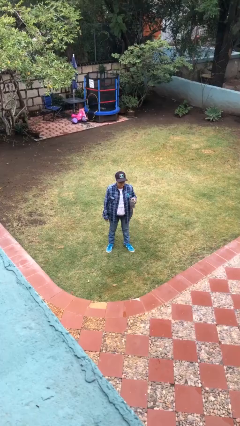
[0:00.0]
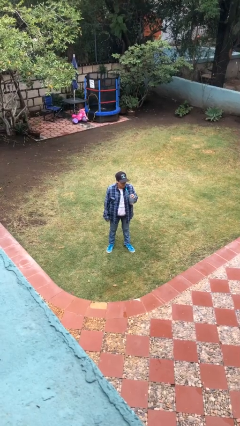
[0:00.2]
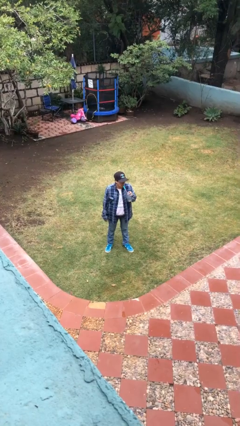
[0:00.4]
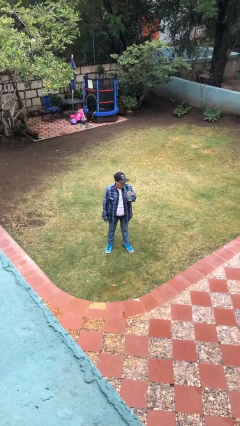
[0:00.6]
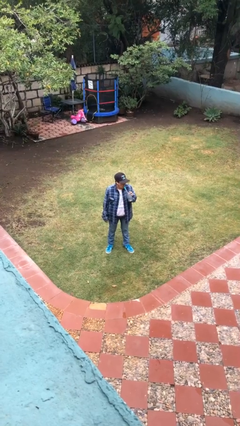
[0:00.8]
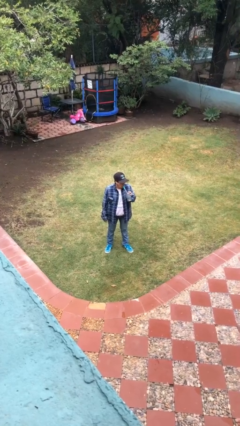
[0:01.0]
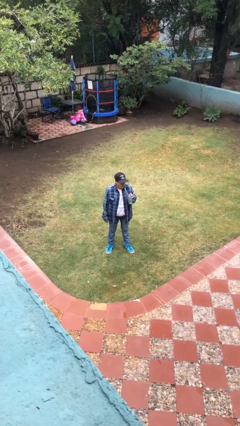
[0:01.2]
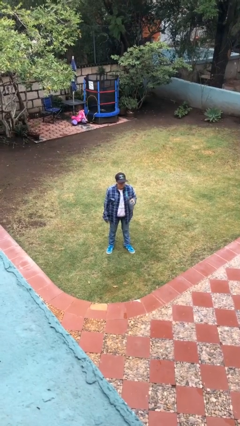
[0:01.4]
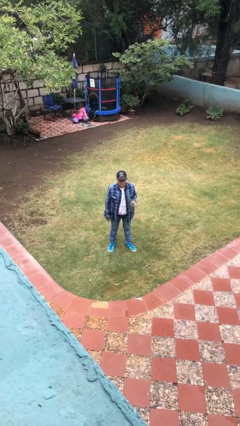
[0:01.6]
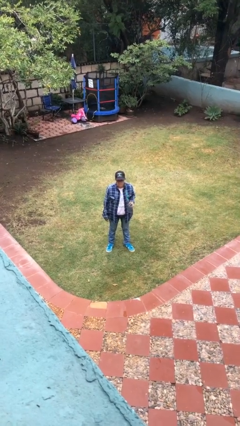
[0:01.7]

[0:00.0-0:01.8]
person drinks from straw

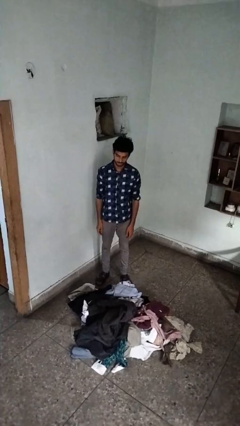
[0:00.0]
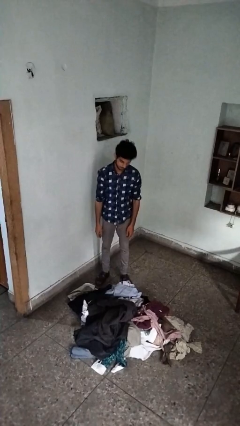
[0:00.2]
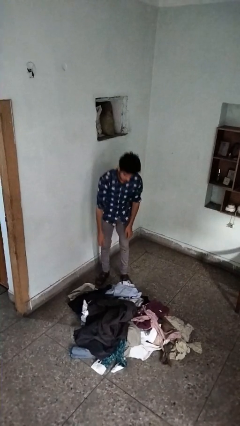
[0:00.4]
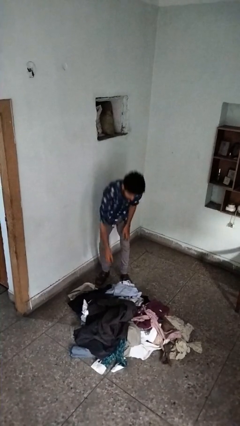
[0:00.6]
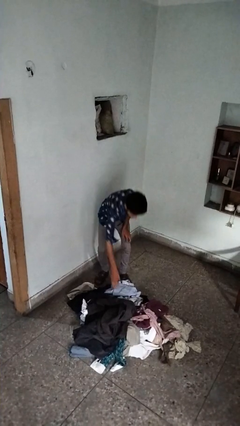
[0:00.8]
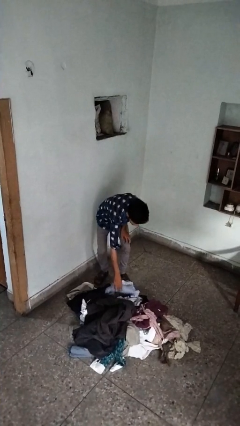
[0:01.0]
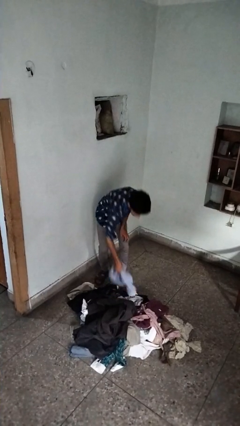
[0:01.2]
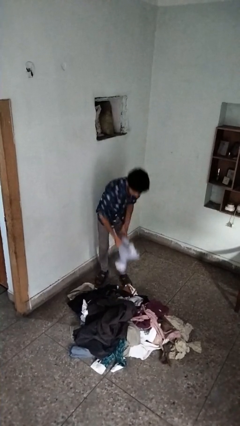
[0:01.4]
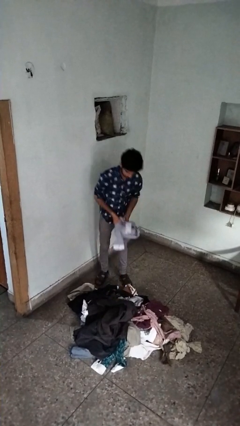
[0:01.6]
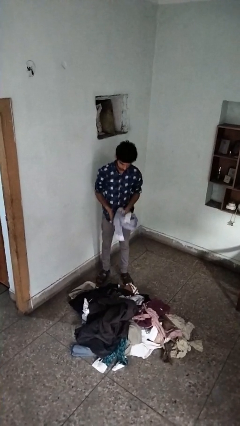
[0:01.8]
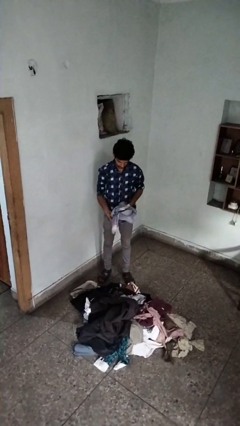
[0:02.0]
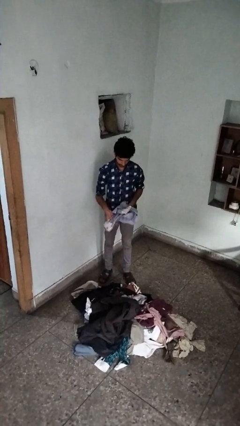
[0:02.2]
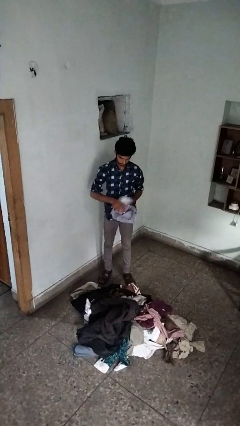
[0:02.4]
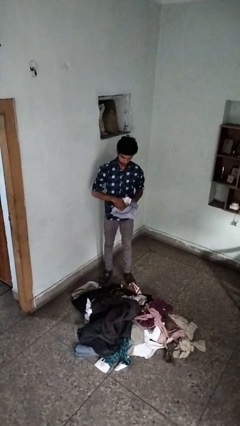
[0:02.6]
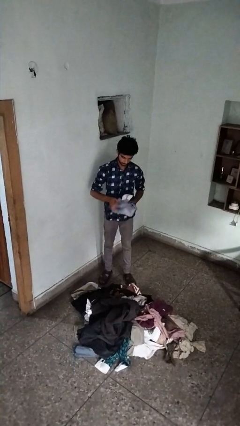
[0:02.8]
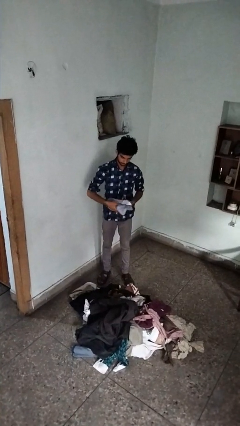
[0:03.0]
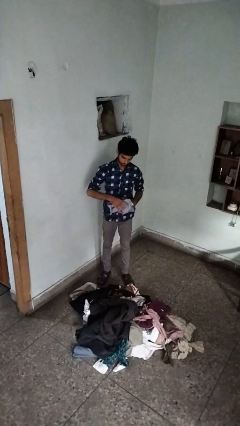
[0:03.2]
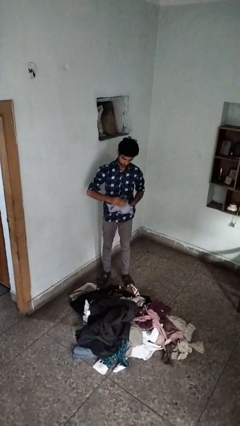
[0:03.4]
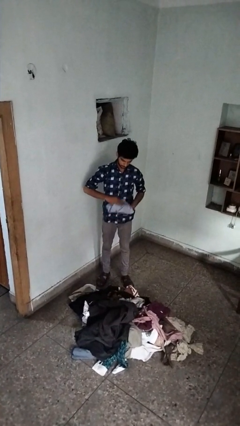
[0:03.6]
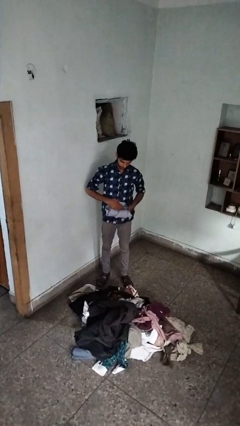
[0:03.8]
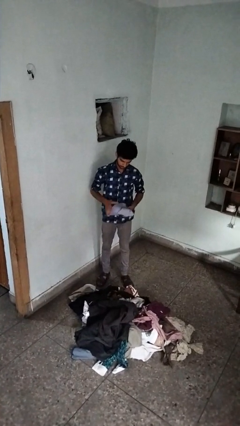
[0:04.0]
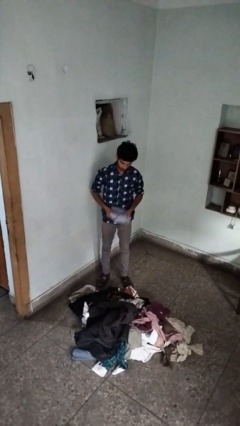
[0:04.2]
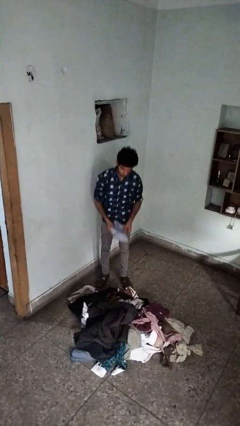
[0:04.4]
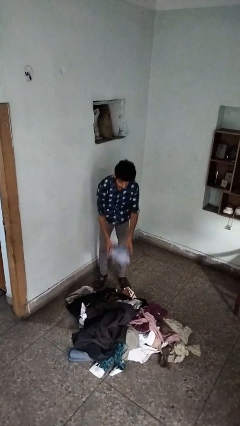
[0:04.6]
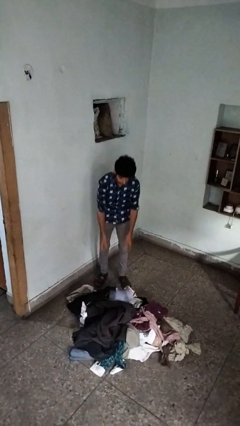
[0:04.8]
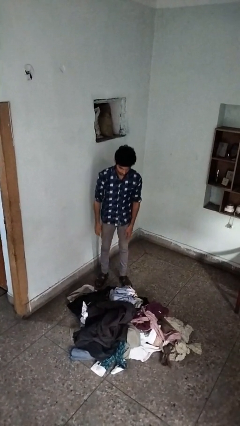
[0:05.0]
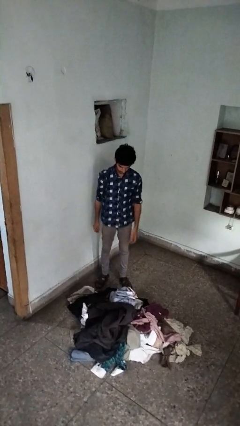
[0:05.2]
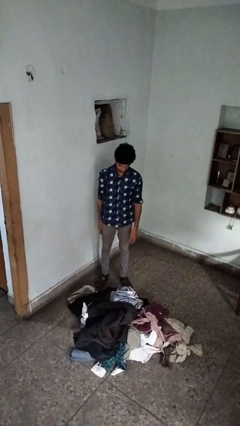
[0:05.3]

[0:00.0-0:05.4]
person folds shirt

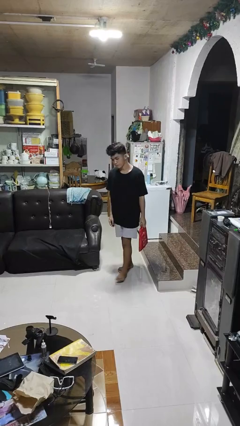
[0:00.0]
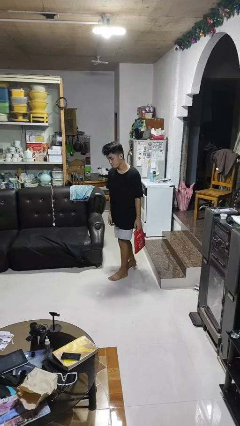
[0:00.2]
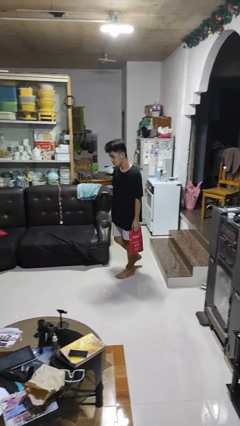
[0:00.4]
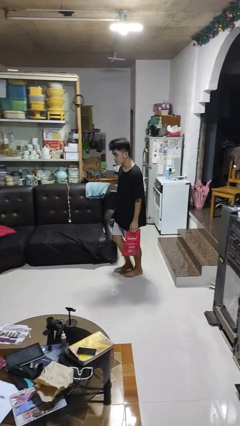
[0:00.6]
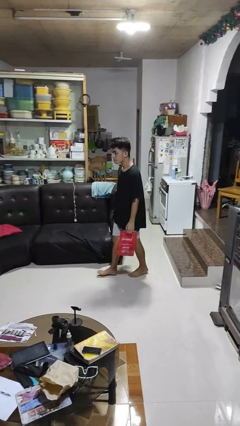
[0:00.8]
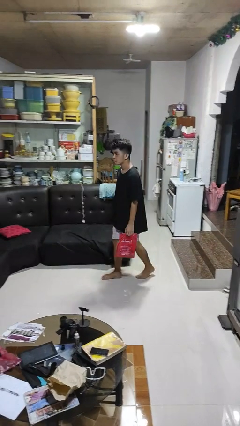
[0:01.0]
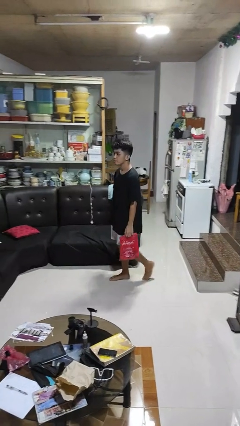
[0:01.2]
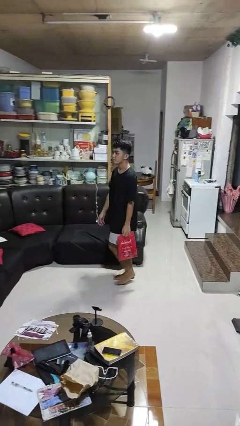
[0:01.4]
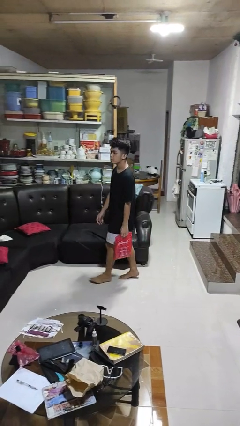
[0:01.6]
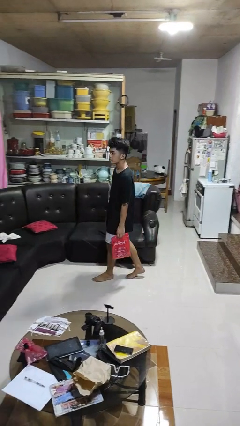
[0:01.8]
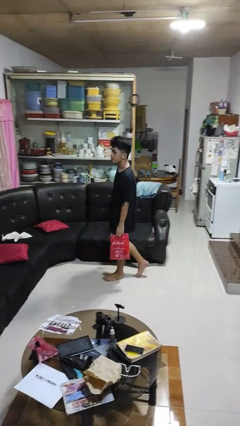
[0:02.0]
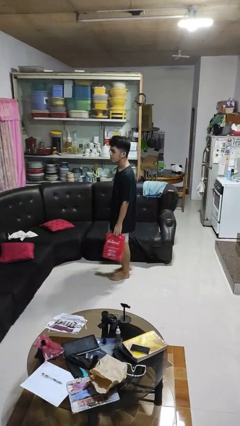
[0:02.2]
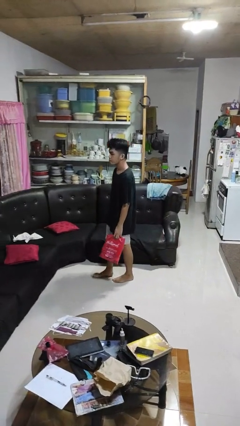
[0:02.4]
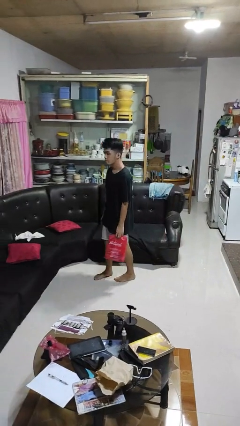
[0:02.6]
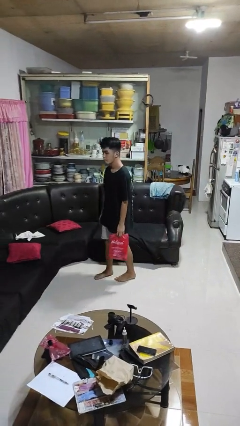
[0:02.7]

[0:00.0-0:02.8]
person carries groceries

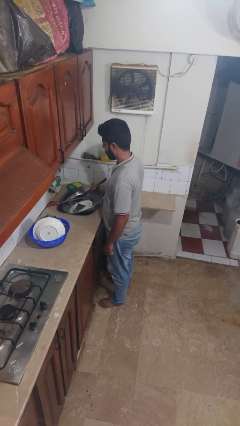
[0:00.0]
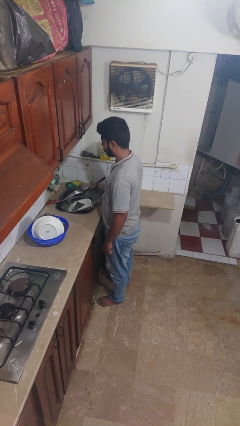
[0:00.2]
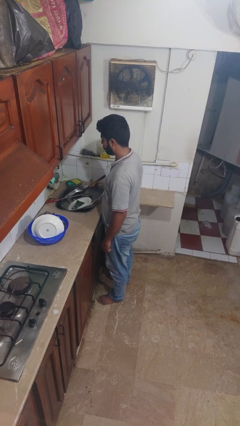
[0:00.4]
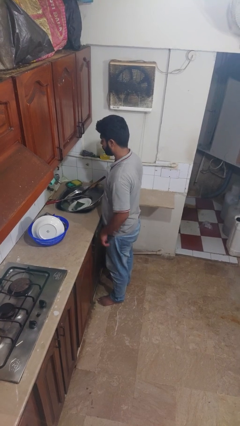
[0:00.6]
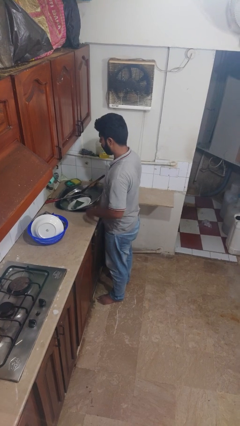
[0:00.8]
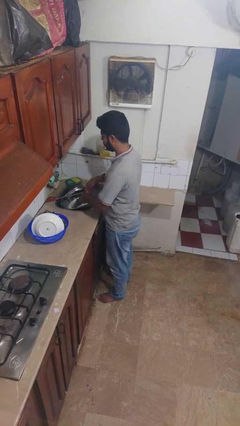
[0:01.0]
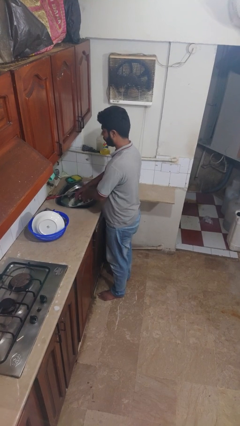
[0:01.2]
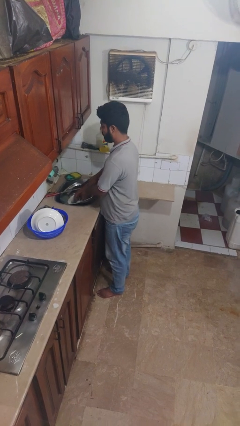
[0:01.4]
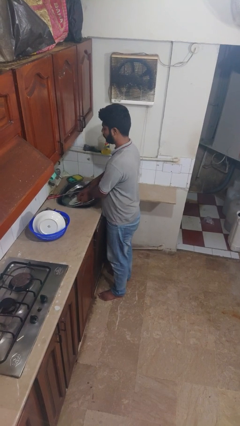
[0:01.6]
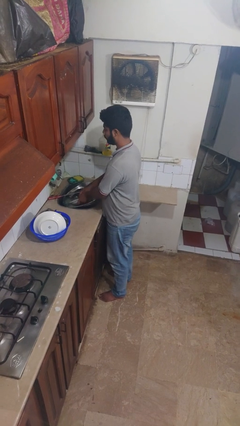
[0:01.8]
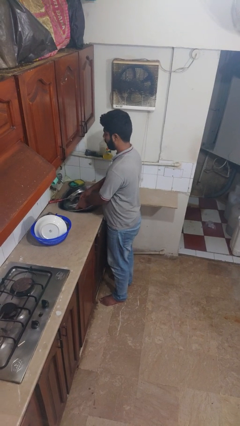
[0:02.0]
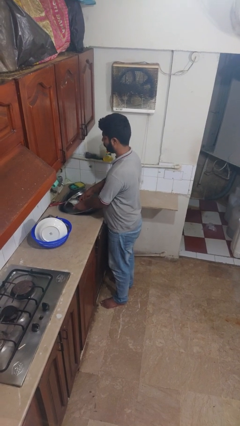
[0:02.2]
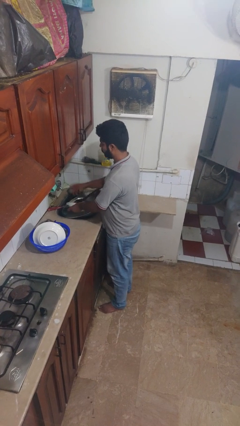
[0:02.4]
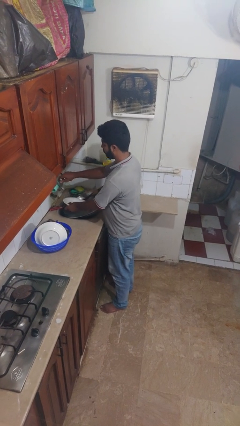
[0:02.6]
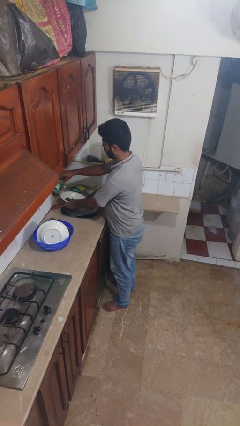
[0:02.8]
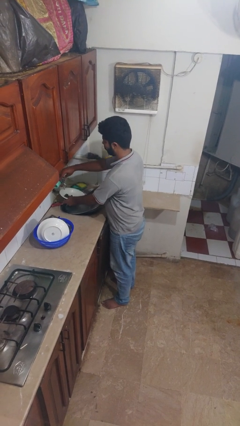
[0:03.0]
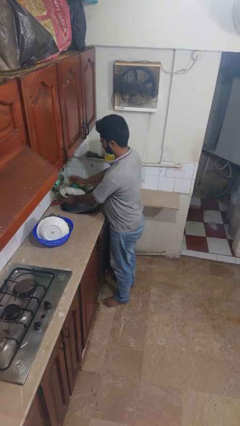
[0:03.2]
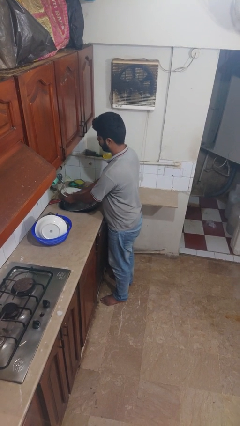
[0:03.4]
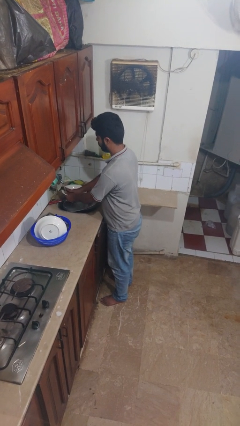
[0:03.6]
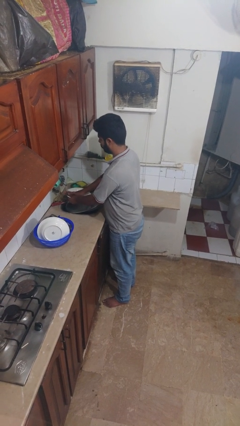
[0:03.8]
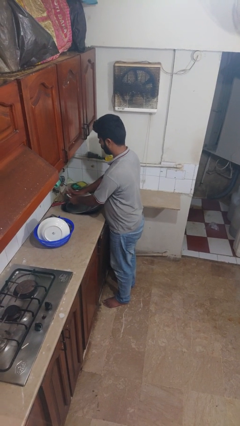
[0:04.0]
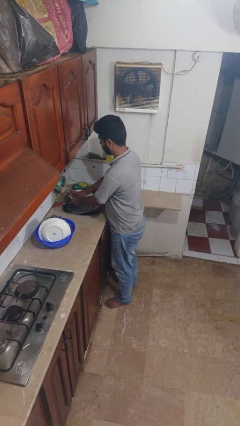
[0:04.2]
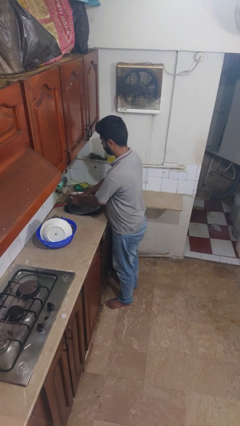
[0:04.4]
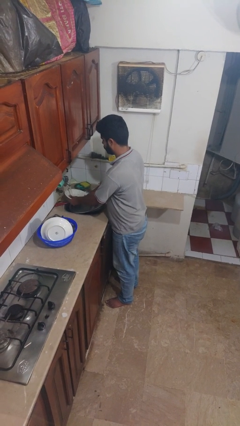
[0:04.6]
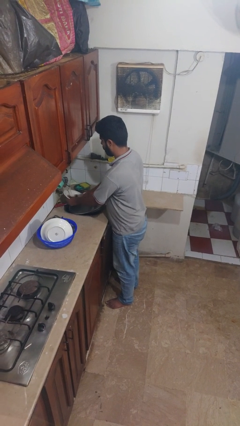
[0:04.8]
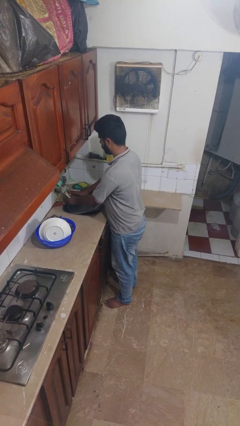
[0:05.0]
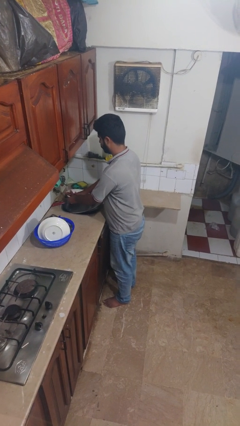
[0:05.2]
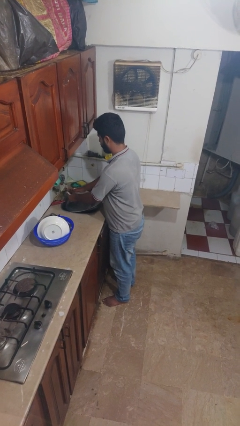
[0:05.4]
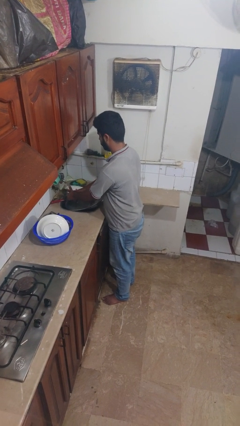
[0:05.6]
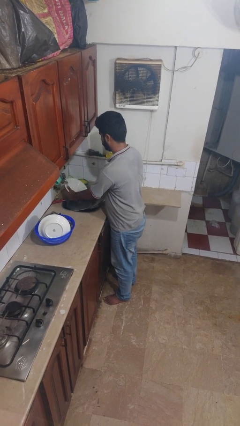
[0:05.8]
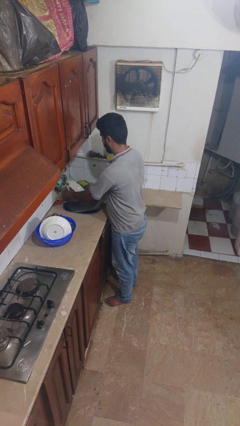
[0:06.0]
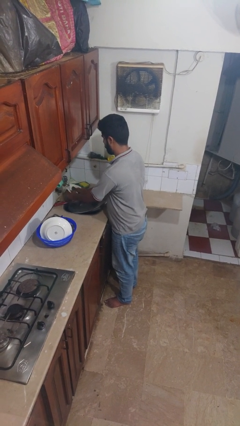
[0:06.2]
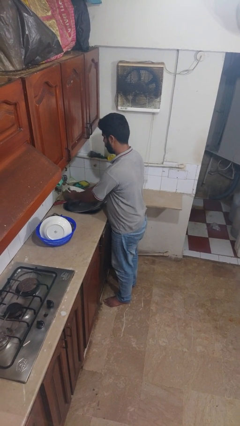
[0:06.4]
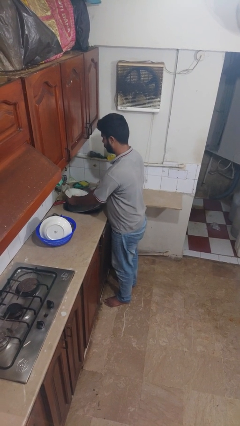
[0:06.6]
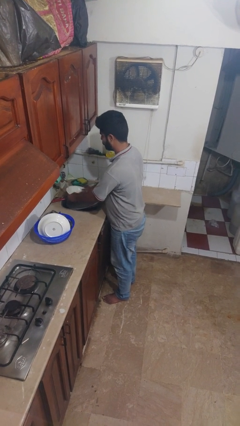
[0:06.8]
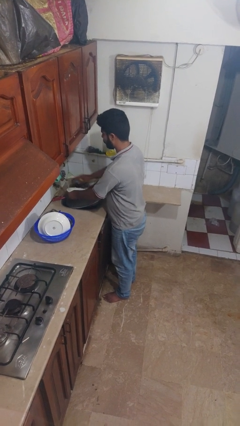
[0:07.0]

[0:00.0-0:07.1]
person washes dish

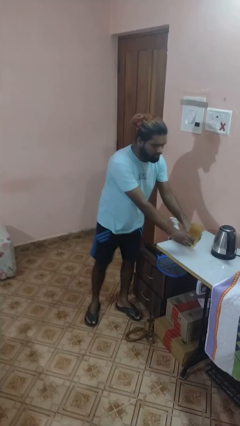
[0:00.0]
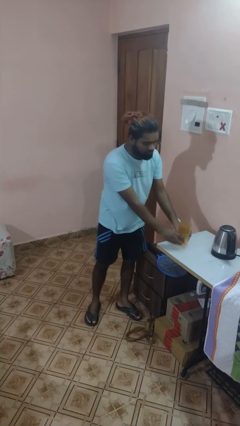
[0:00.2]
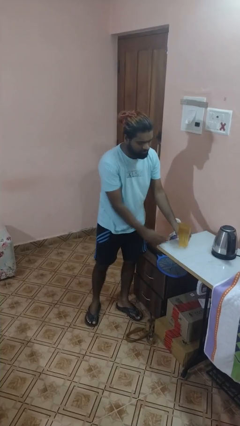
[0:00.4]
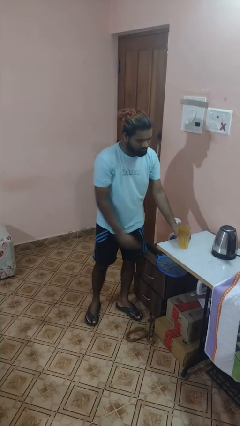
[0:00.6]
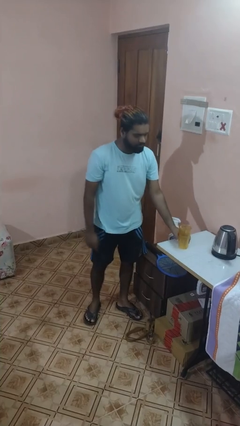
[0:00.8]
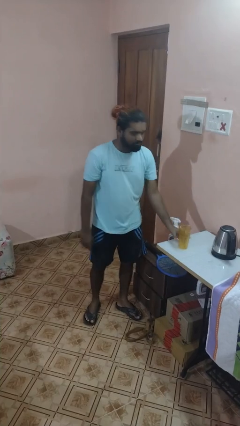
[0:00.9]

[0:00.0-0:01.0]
person sets upright glass
